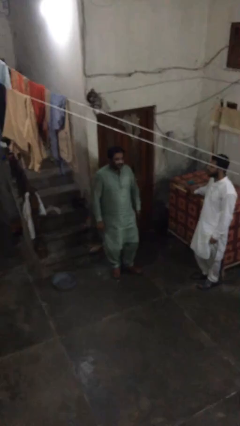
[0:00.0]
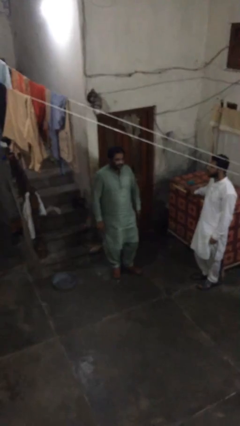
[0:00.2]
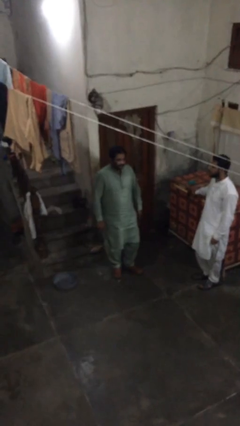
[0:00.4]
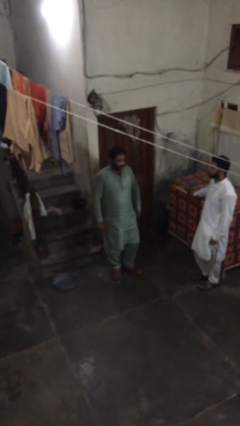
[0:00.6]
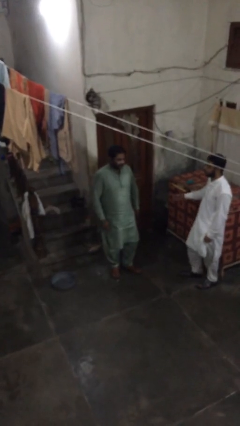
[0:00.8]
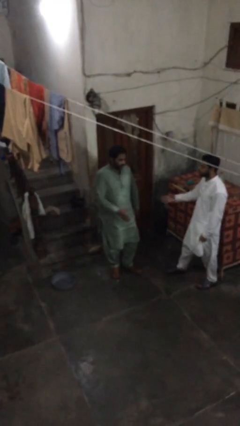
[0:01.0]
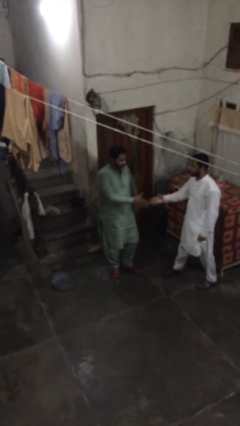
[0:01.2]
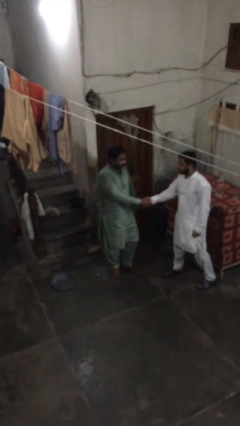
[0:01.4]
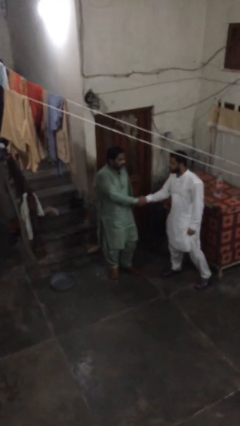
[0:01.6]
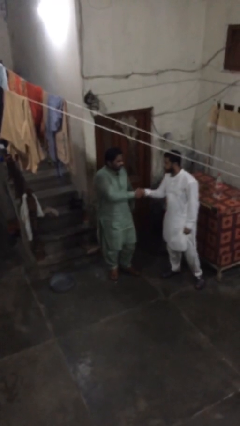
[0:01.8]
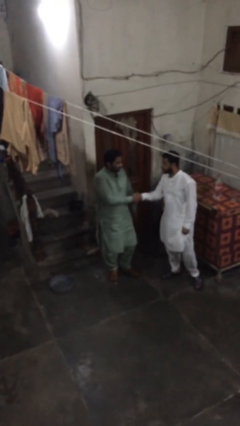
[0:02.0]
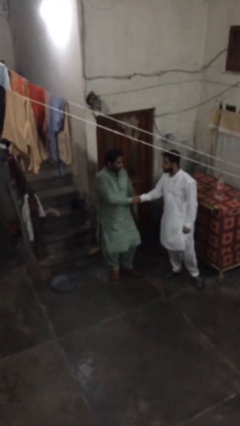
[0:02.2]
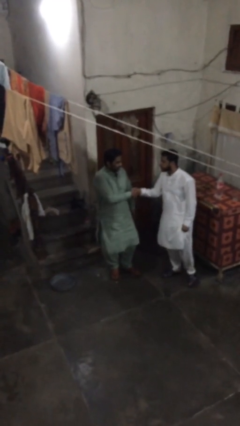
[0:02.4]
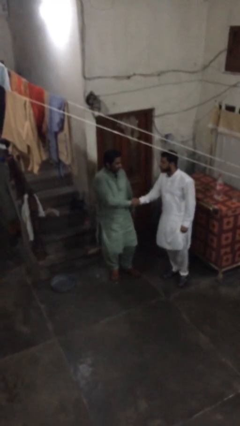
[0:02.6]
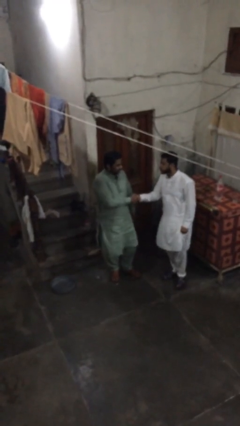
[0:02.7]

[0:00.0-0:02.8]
person shakes hand

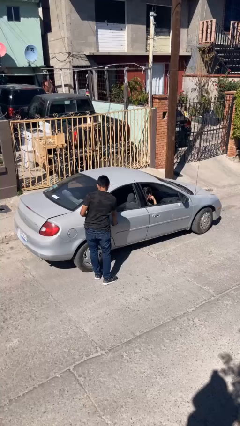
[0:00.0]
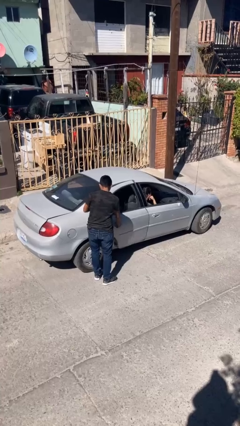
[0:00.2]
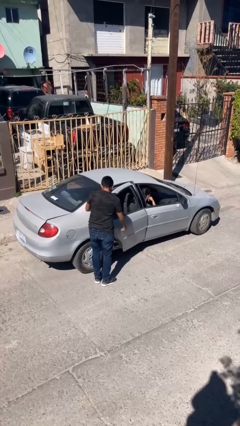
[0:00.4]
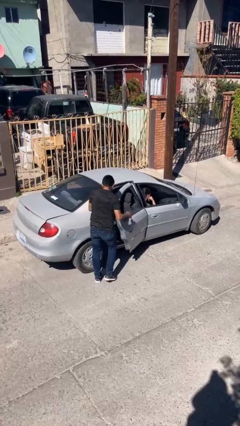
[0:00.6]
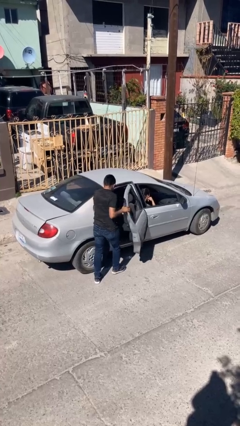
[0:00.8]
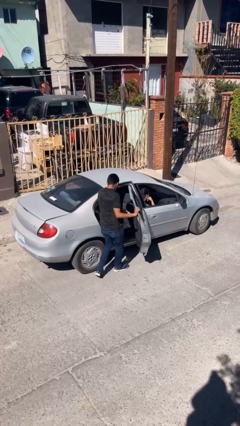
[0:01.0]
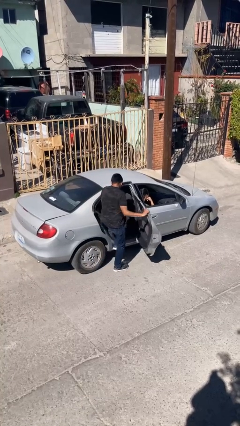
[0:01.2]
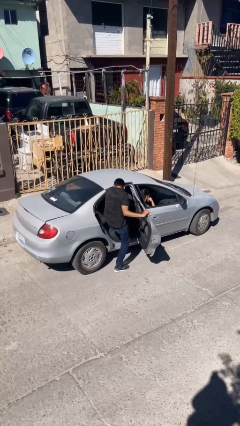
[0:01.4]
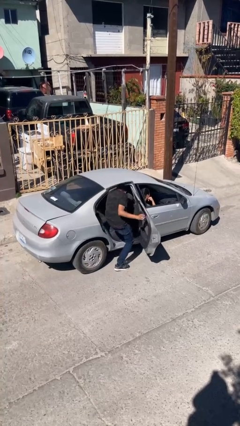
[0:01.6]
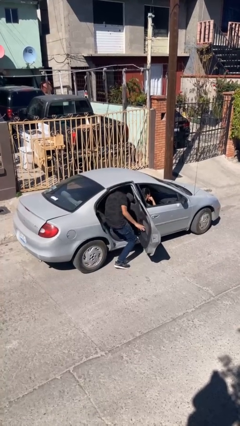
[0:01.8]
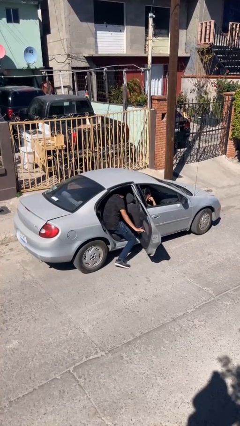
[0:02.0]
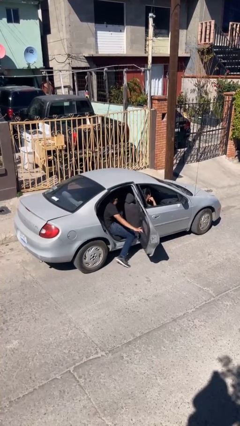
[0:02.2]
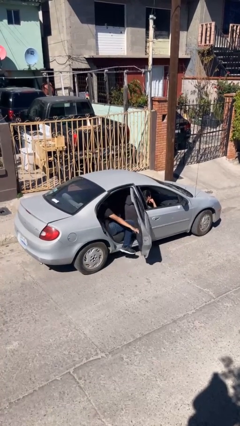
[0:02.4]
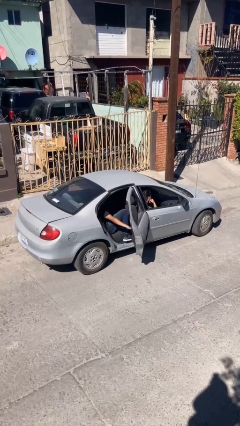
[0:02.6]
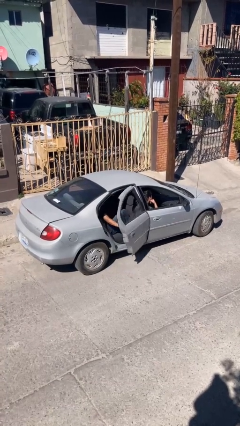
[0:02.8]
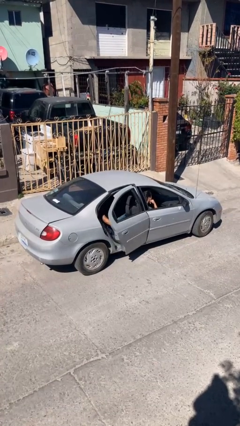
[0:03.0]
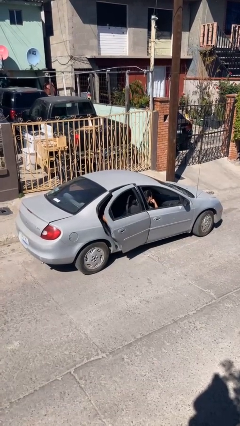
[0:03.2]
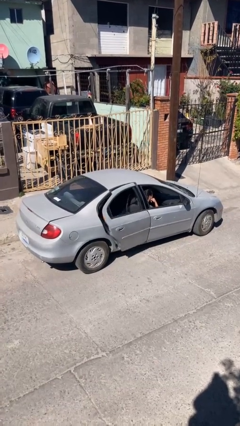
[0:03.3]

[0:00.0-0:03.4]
car picks up person

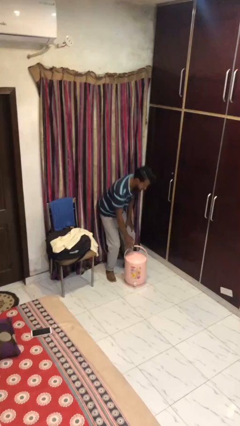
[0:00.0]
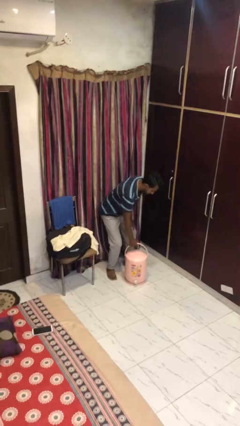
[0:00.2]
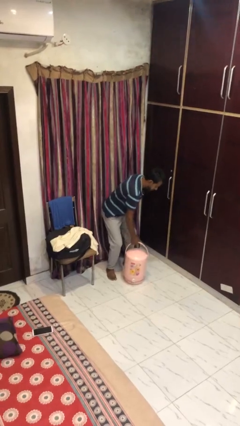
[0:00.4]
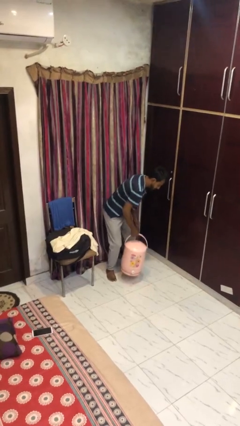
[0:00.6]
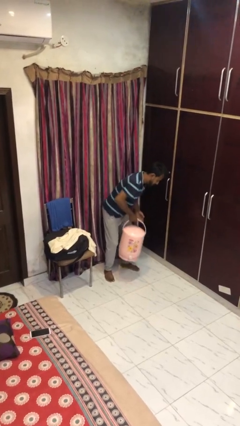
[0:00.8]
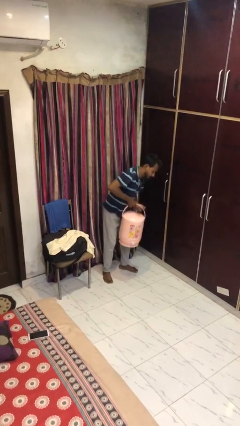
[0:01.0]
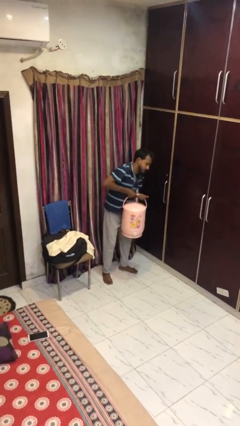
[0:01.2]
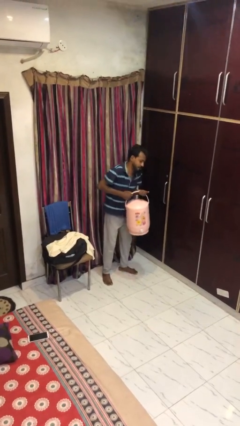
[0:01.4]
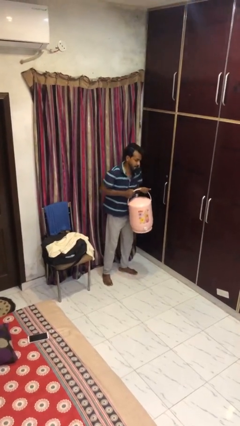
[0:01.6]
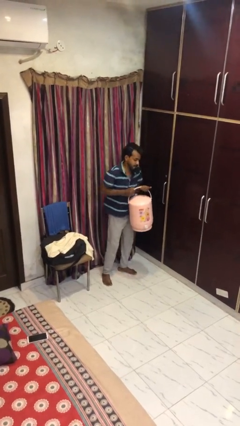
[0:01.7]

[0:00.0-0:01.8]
person picks up object from floor

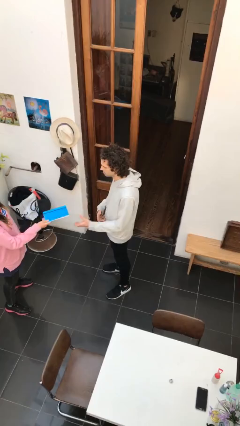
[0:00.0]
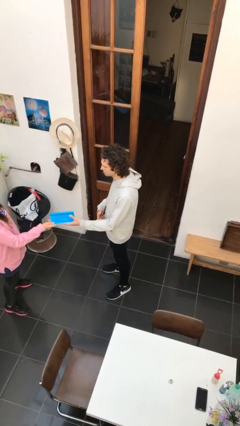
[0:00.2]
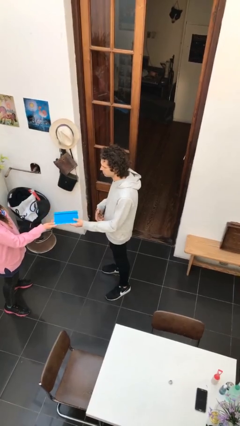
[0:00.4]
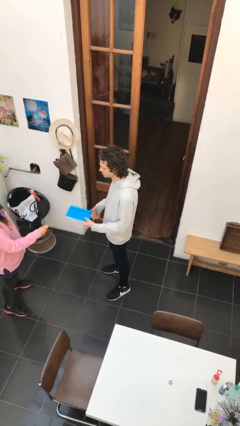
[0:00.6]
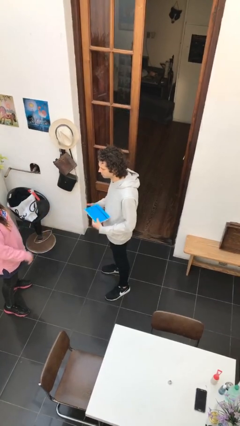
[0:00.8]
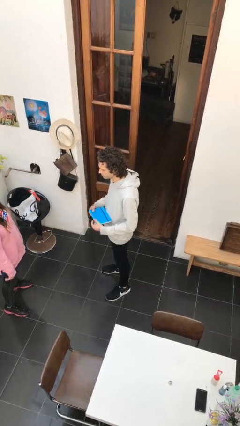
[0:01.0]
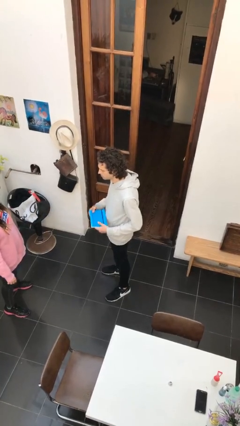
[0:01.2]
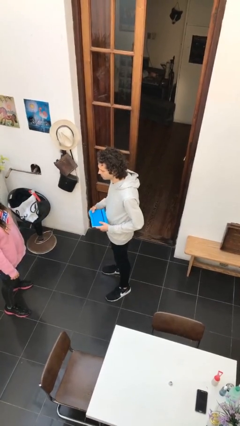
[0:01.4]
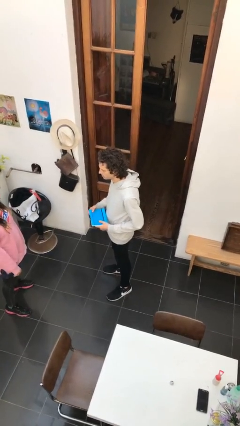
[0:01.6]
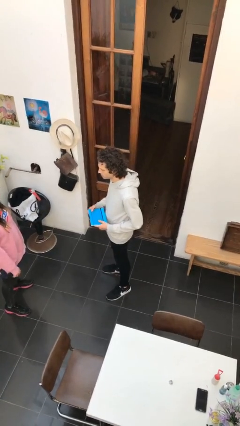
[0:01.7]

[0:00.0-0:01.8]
person transfers object to person

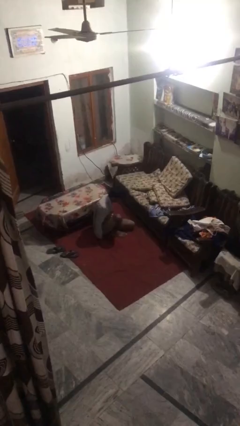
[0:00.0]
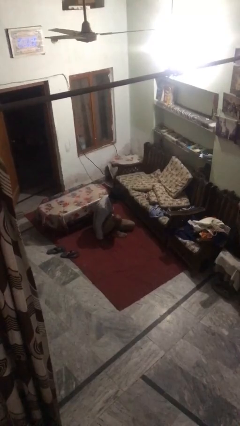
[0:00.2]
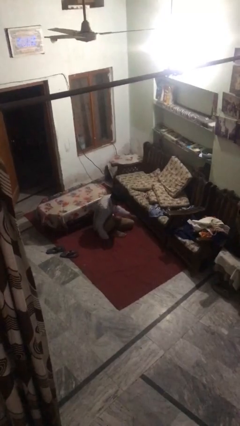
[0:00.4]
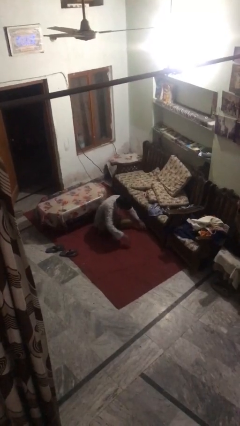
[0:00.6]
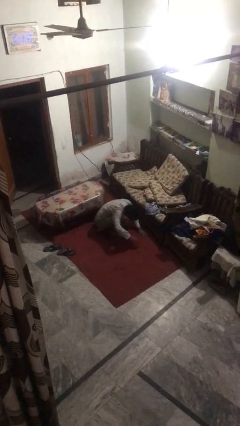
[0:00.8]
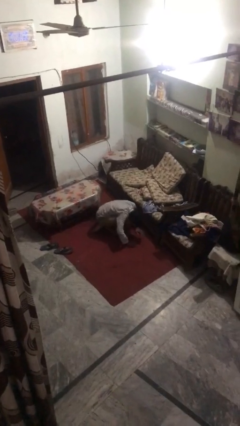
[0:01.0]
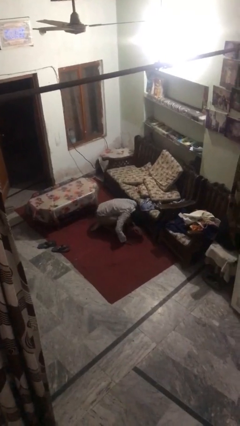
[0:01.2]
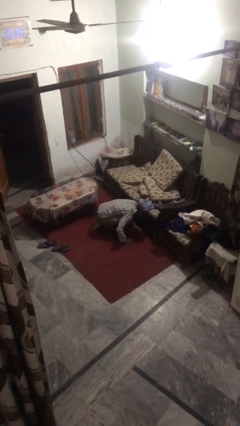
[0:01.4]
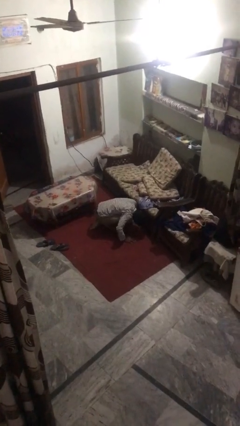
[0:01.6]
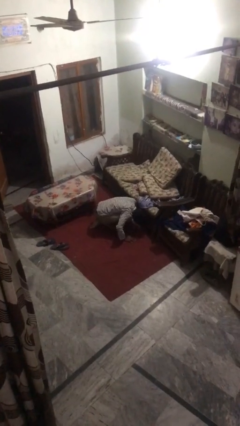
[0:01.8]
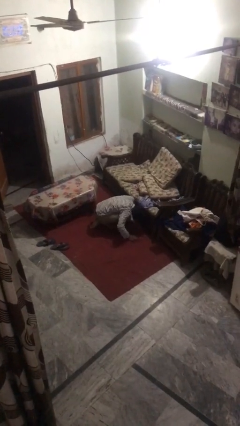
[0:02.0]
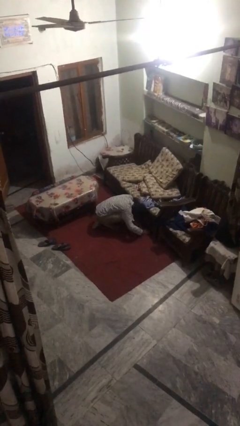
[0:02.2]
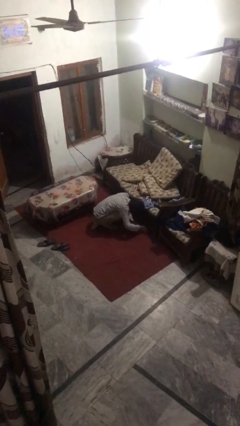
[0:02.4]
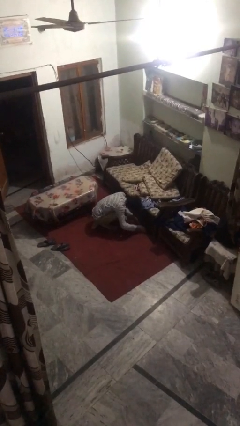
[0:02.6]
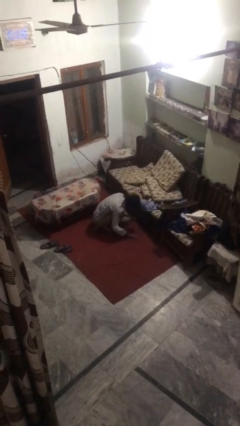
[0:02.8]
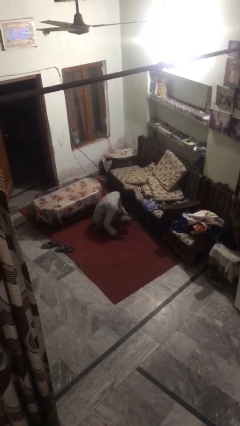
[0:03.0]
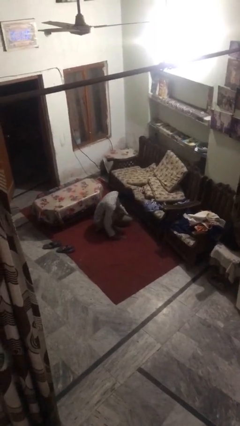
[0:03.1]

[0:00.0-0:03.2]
person searches under couch

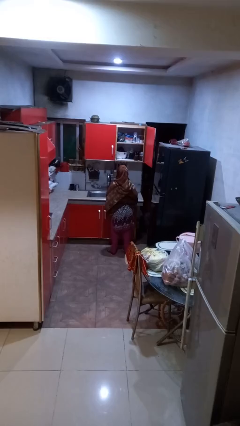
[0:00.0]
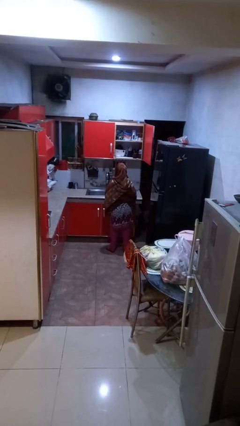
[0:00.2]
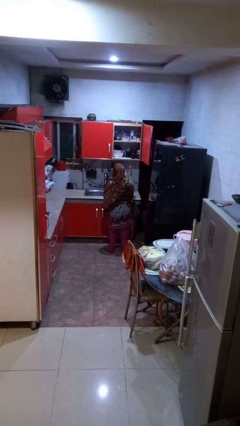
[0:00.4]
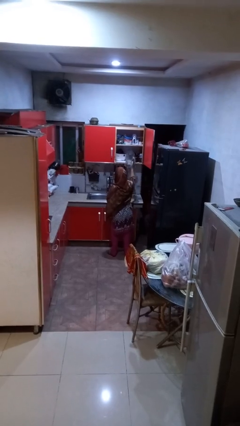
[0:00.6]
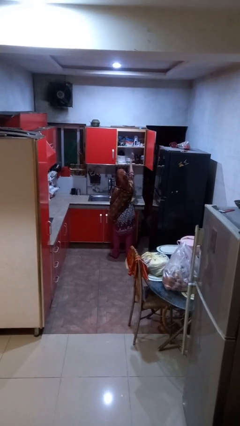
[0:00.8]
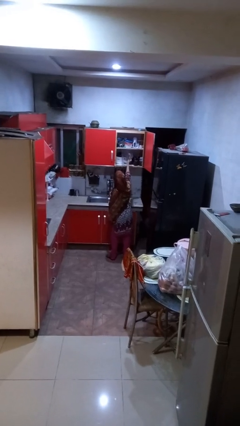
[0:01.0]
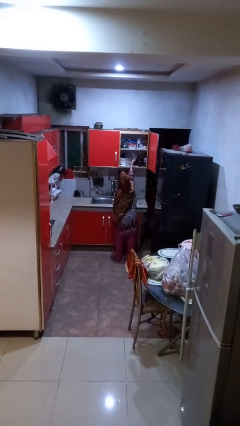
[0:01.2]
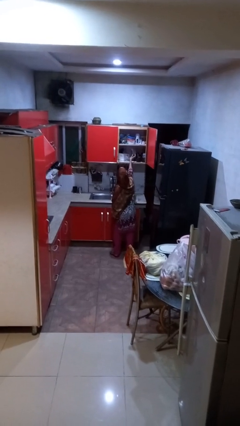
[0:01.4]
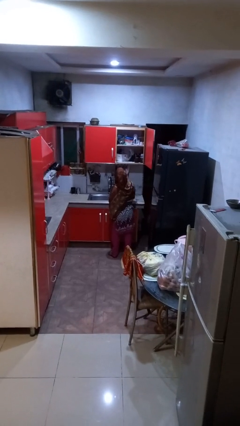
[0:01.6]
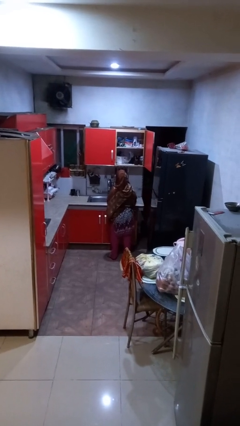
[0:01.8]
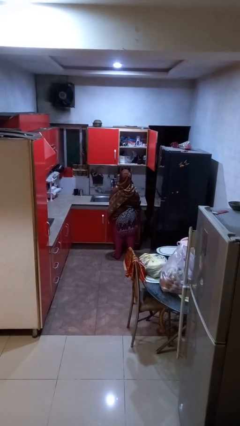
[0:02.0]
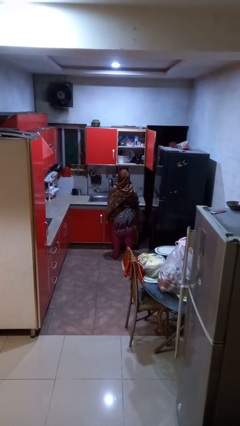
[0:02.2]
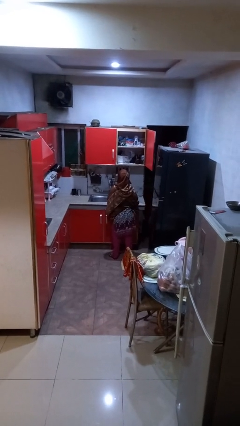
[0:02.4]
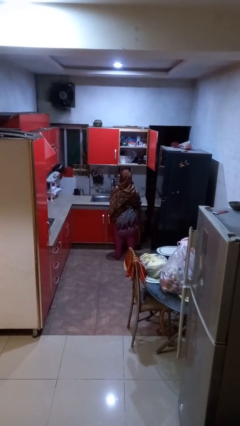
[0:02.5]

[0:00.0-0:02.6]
person puts object in cabinet

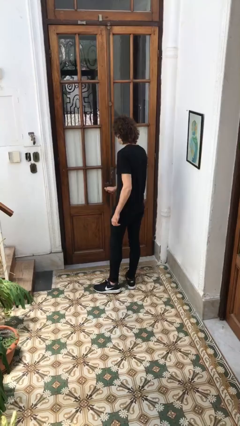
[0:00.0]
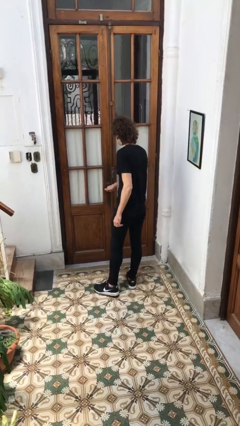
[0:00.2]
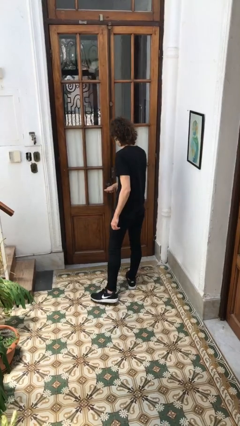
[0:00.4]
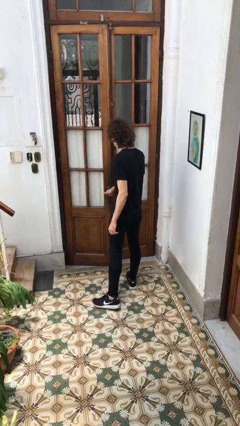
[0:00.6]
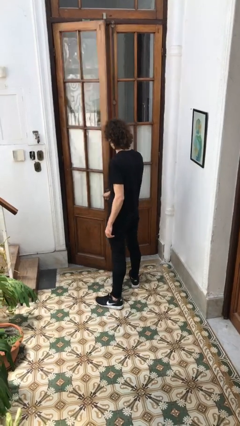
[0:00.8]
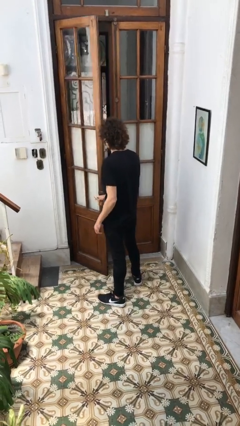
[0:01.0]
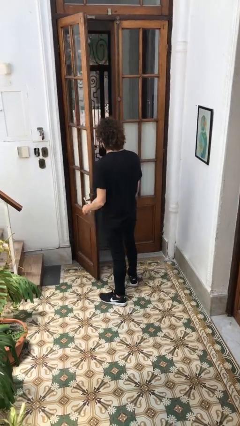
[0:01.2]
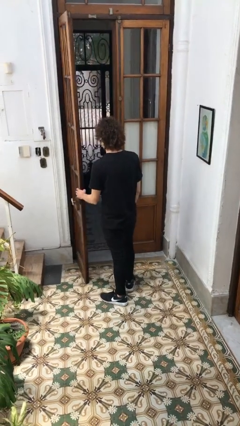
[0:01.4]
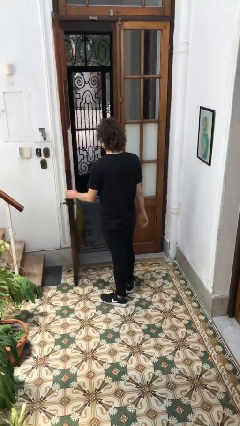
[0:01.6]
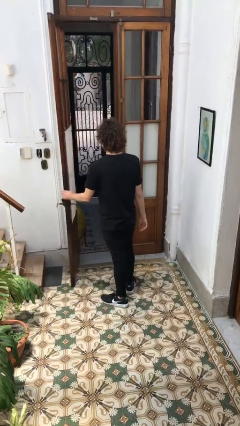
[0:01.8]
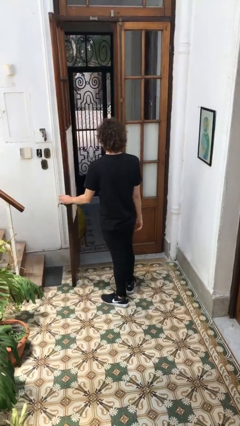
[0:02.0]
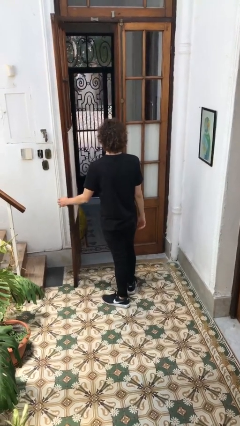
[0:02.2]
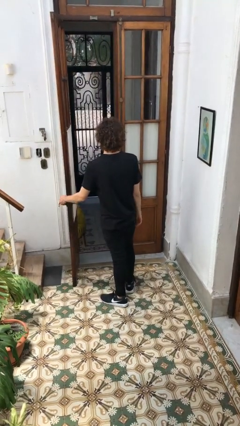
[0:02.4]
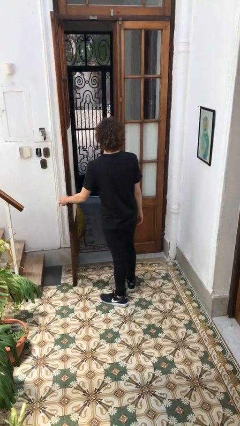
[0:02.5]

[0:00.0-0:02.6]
person opens facility door
